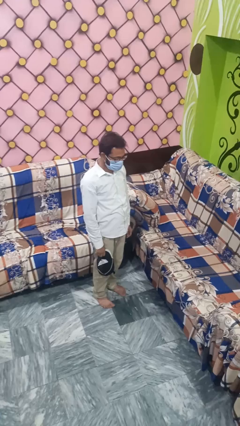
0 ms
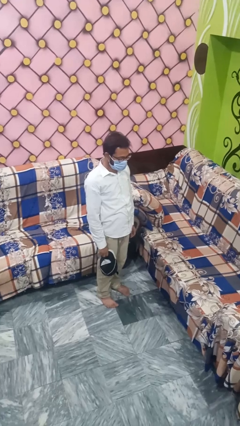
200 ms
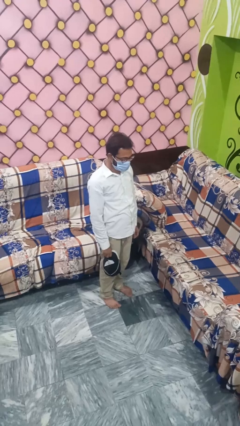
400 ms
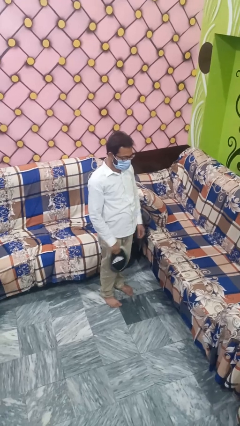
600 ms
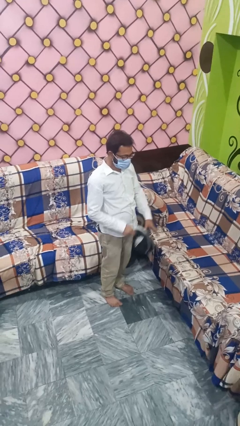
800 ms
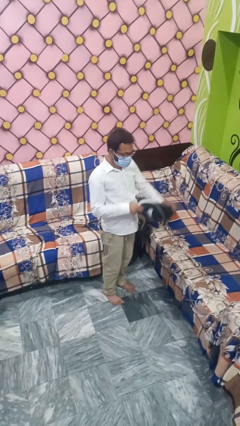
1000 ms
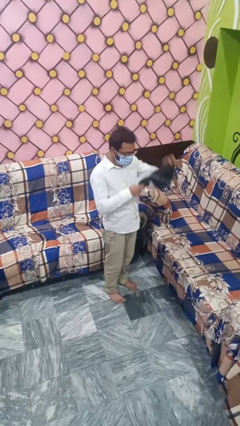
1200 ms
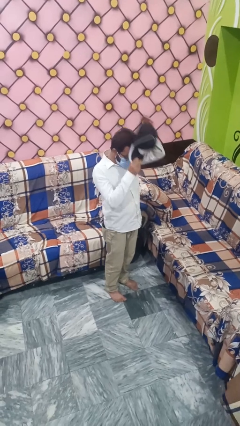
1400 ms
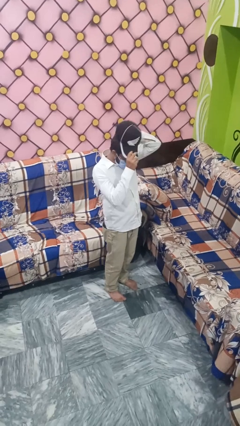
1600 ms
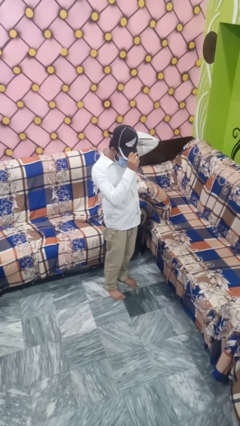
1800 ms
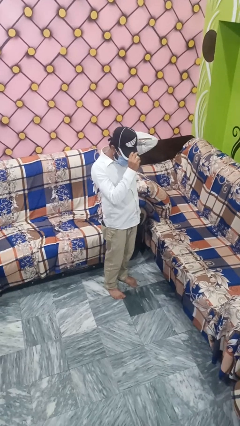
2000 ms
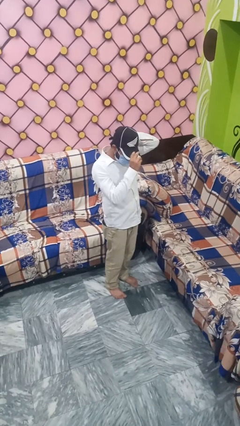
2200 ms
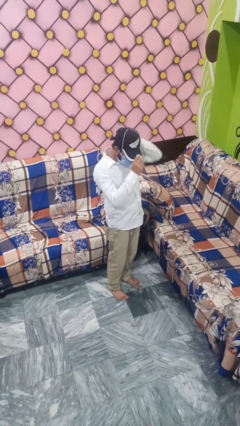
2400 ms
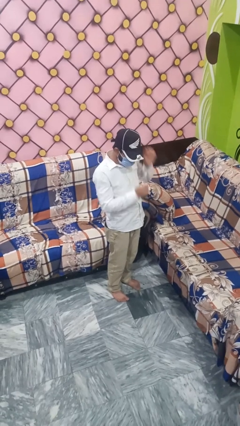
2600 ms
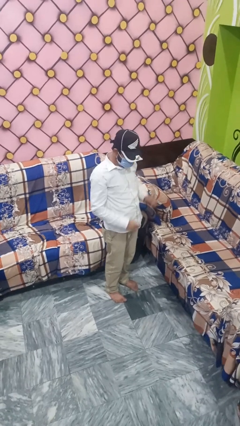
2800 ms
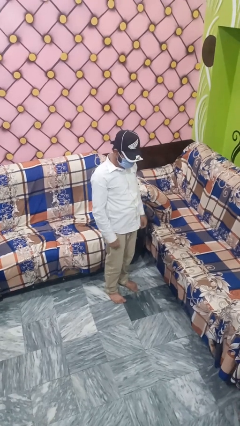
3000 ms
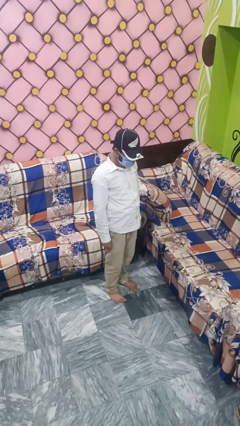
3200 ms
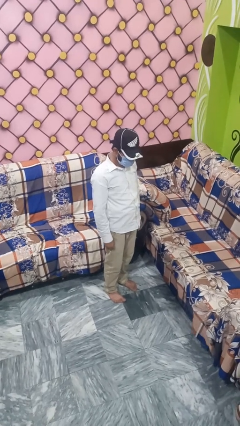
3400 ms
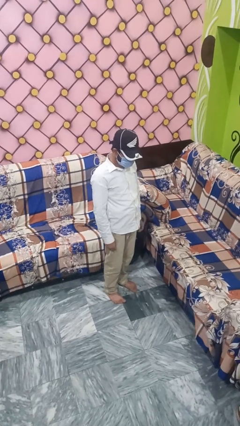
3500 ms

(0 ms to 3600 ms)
person puts on hat

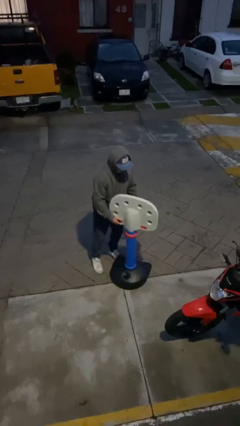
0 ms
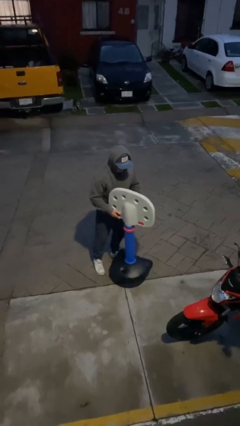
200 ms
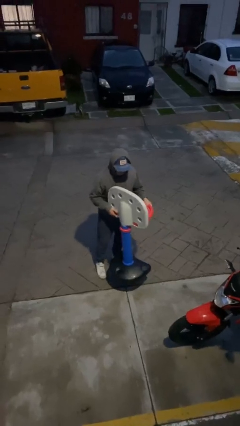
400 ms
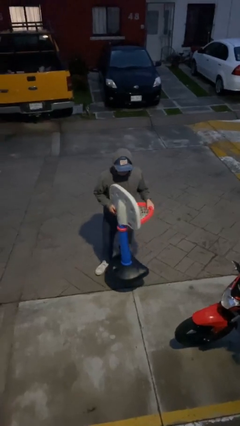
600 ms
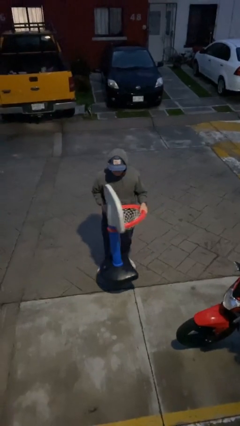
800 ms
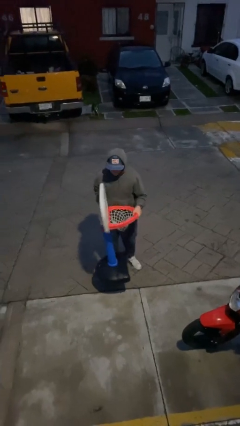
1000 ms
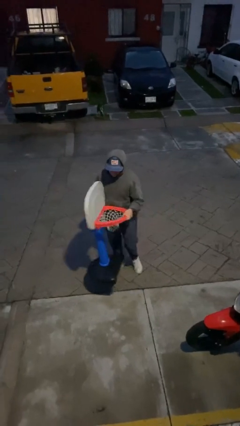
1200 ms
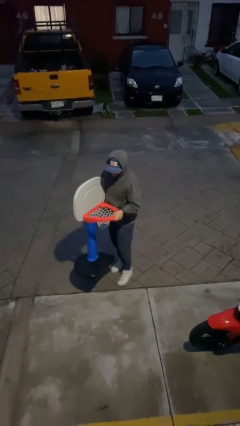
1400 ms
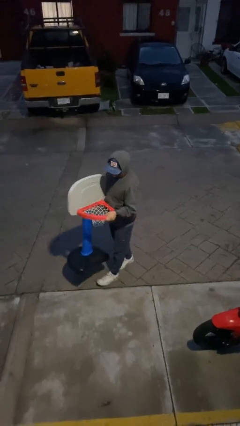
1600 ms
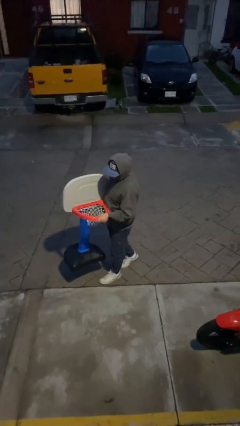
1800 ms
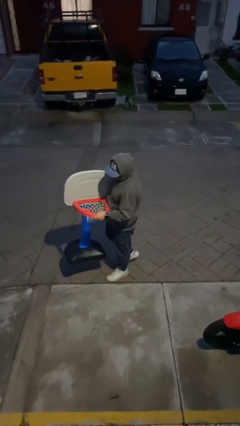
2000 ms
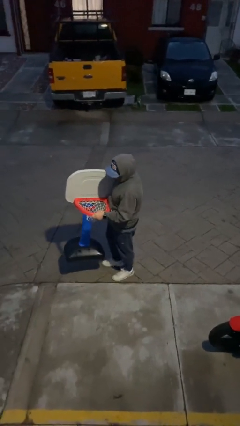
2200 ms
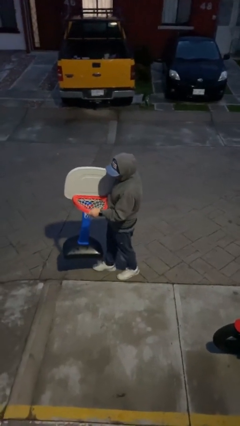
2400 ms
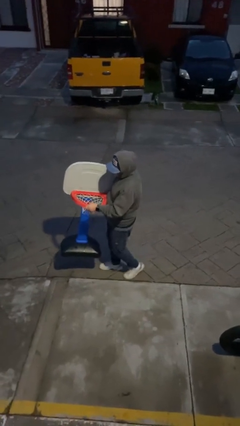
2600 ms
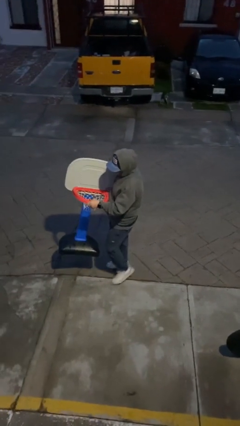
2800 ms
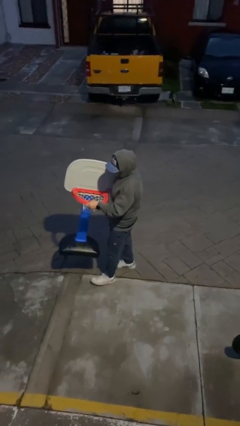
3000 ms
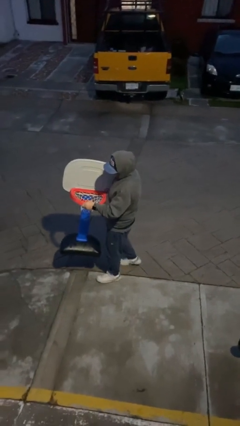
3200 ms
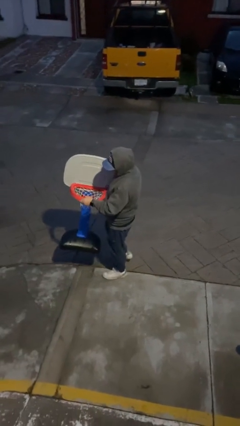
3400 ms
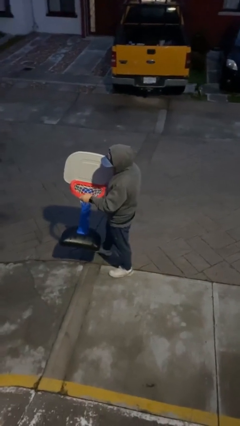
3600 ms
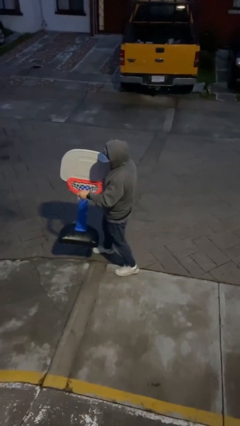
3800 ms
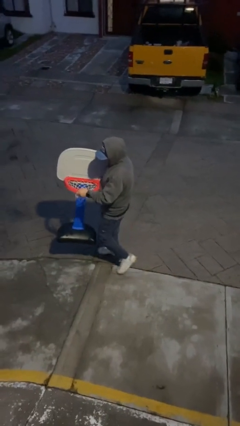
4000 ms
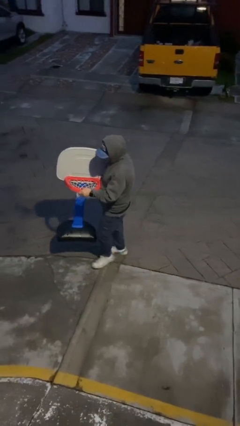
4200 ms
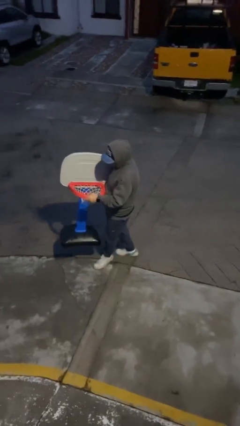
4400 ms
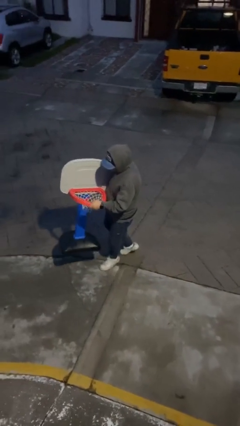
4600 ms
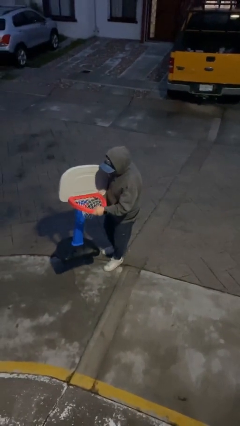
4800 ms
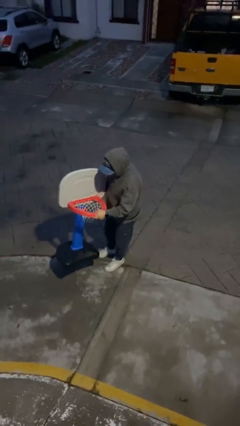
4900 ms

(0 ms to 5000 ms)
person carries heavy object

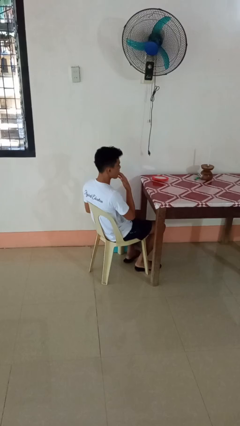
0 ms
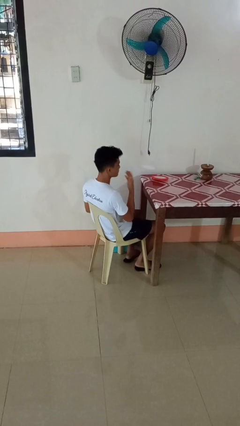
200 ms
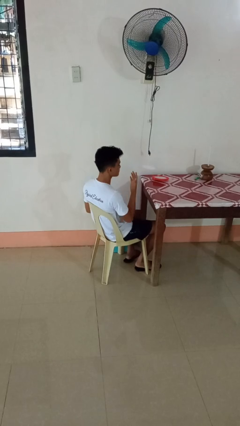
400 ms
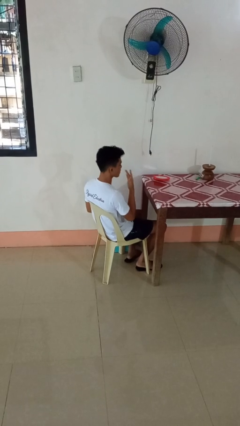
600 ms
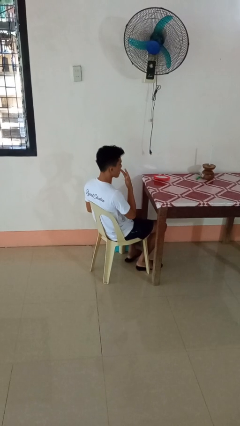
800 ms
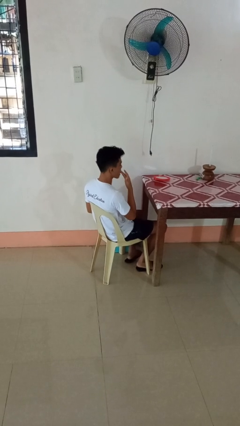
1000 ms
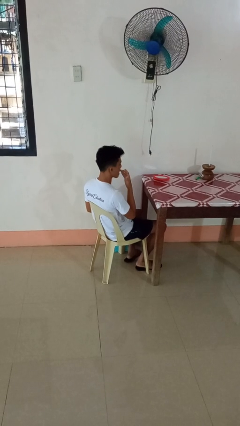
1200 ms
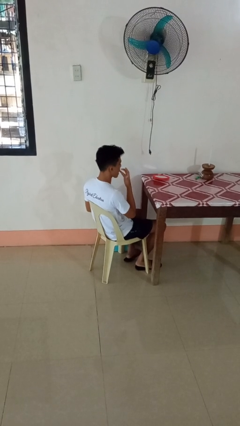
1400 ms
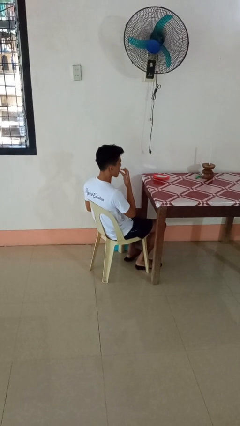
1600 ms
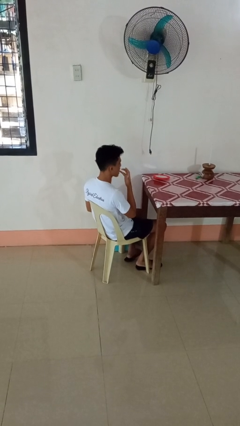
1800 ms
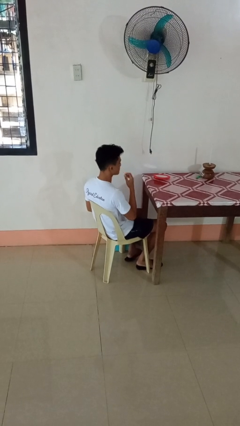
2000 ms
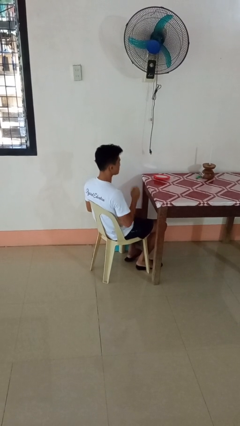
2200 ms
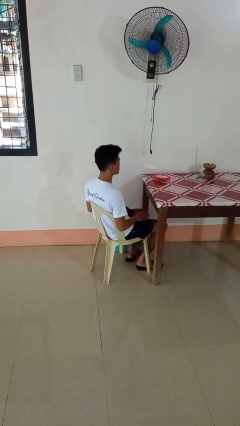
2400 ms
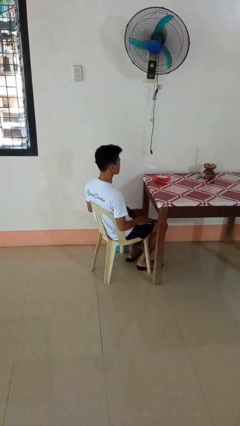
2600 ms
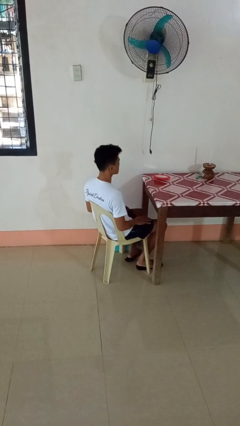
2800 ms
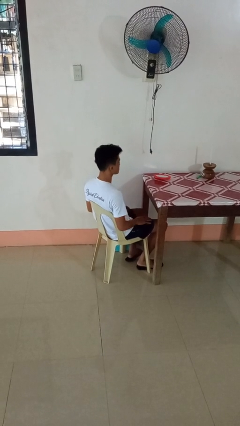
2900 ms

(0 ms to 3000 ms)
person licks fingers

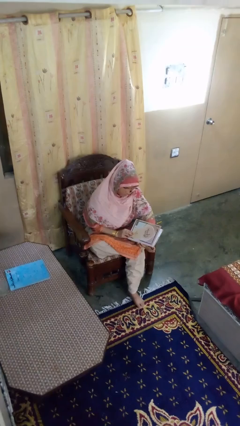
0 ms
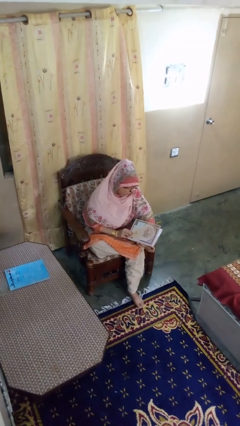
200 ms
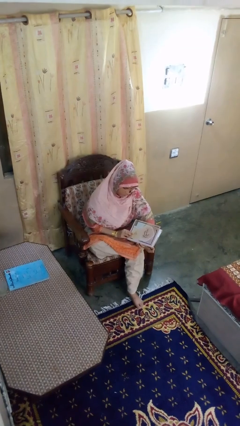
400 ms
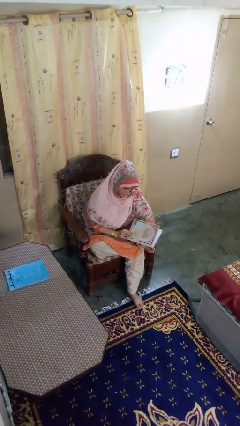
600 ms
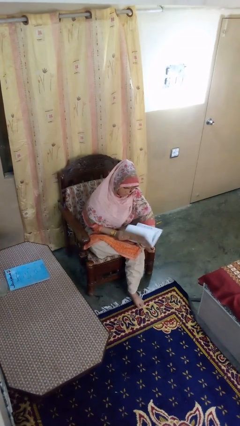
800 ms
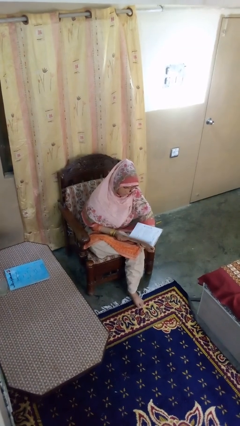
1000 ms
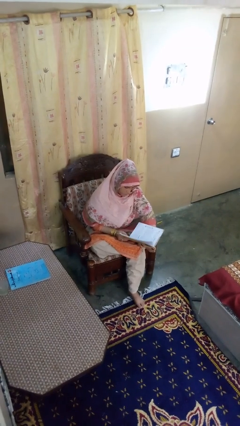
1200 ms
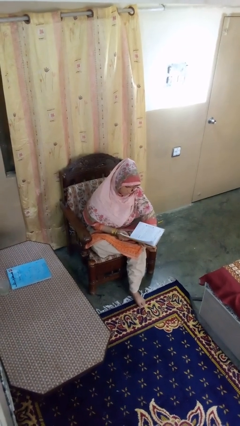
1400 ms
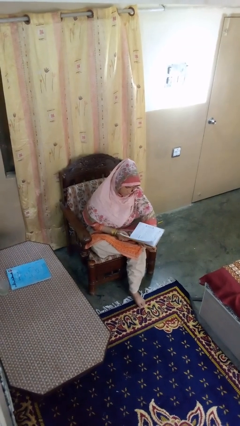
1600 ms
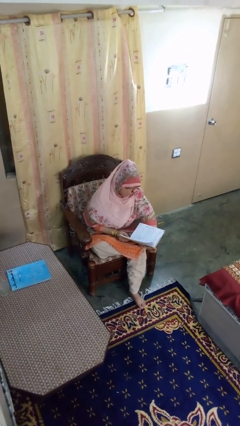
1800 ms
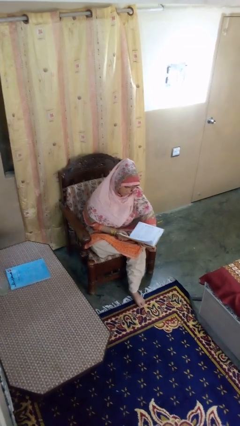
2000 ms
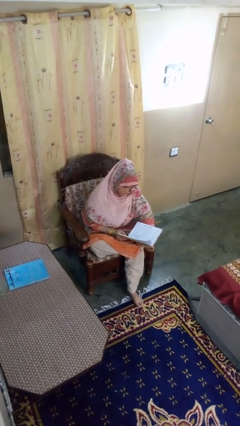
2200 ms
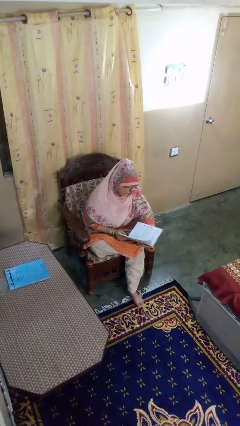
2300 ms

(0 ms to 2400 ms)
person reads book

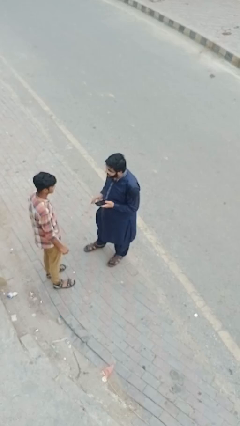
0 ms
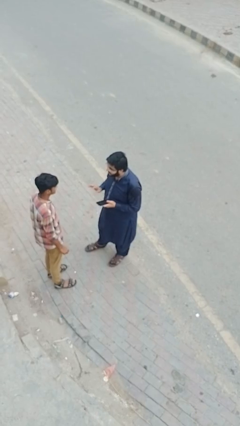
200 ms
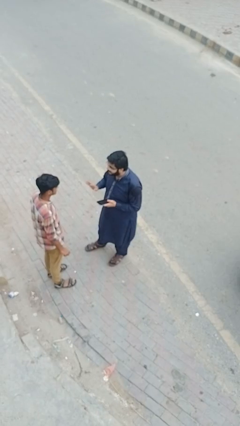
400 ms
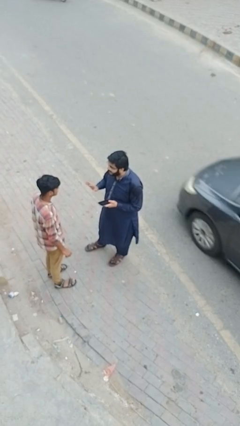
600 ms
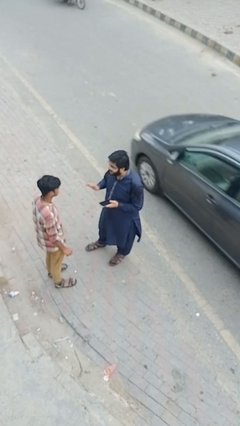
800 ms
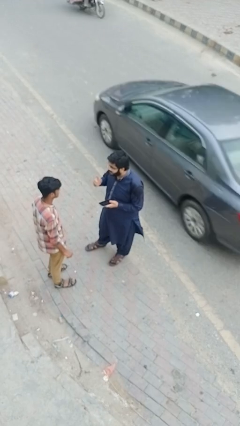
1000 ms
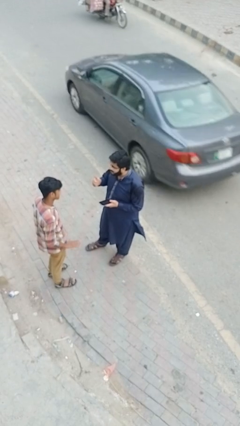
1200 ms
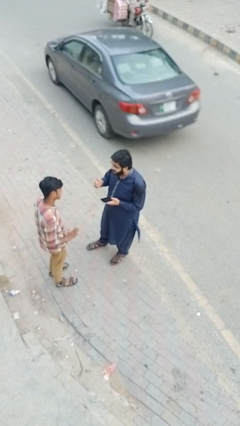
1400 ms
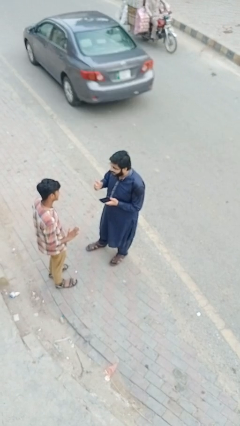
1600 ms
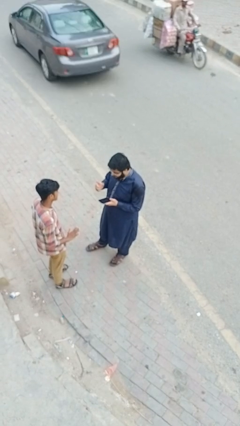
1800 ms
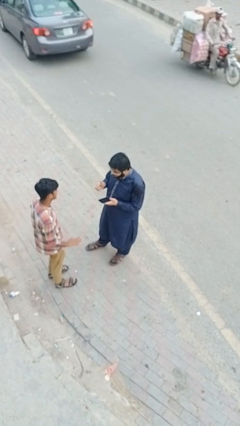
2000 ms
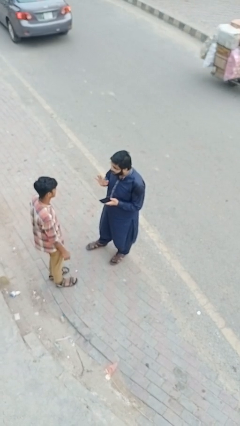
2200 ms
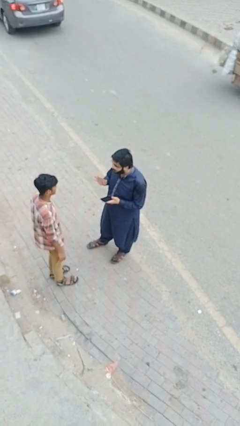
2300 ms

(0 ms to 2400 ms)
person talks to person

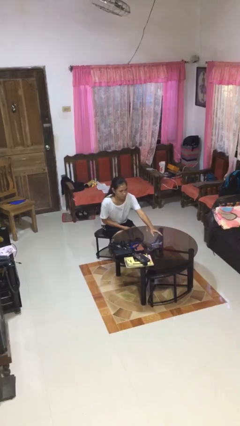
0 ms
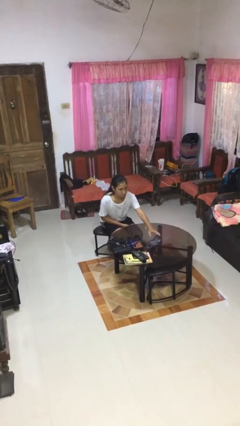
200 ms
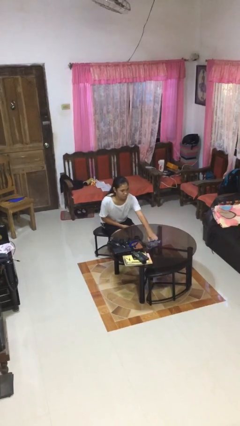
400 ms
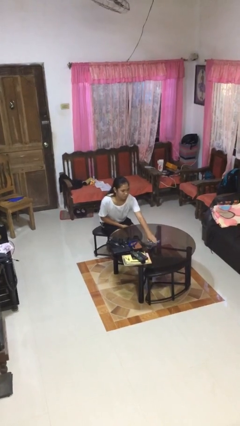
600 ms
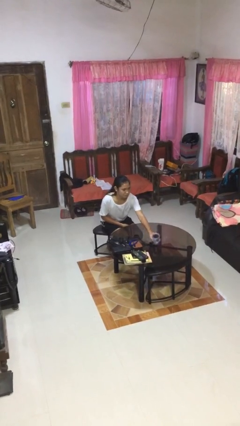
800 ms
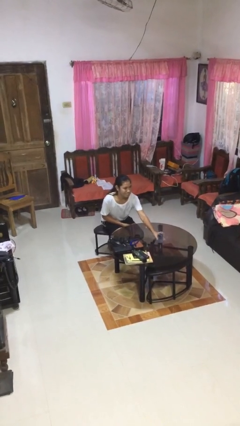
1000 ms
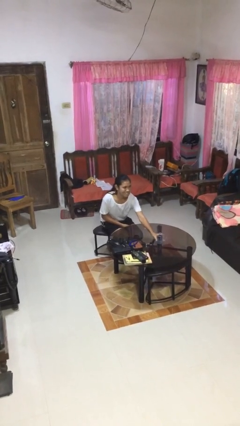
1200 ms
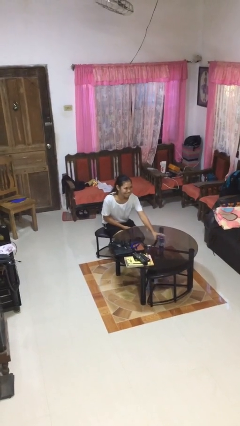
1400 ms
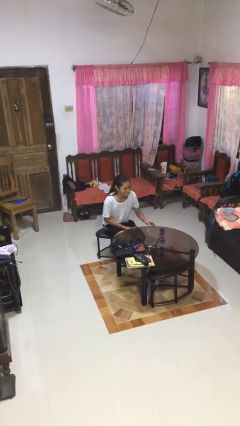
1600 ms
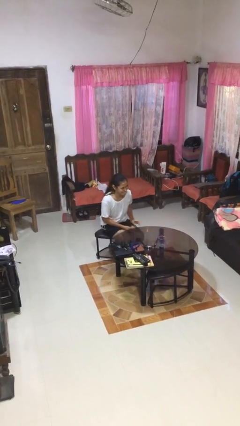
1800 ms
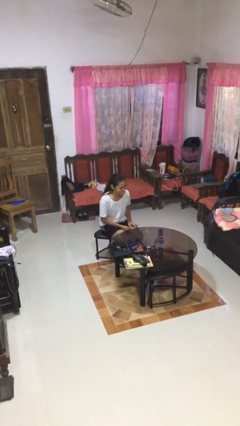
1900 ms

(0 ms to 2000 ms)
person sets upright glass
